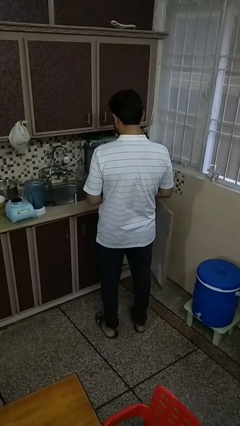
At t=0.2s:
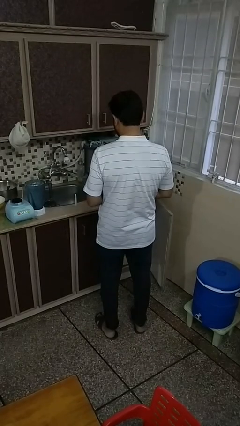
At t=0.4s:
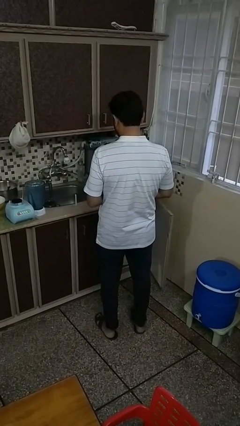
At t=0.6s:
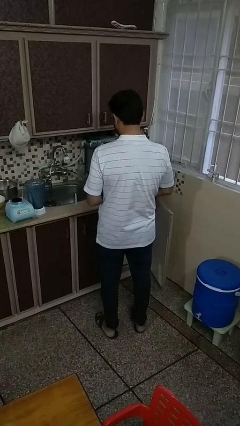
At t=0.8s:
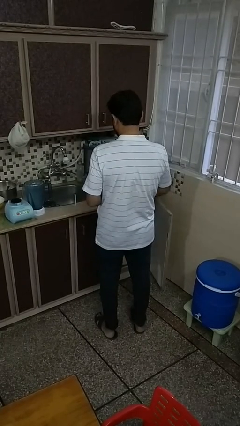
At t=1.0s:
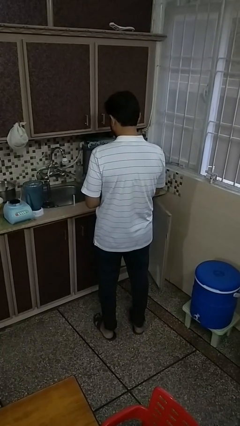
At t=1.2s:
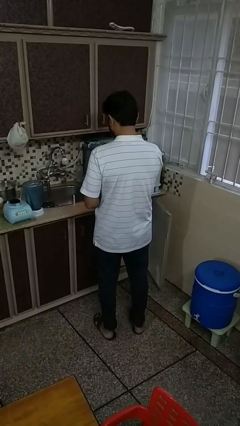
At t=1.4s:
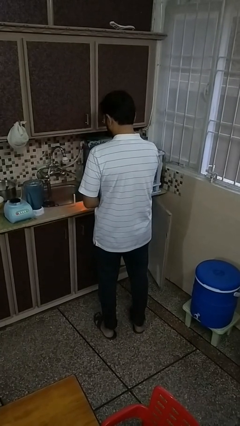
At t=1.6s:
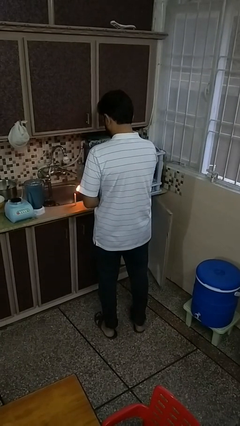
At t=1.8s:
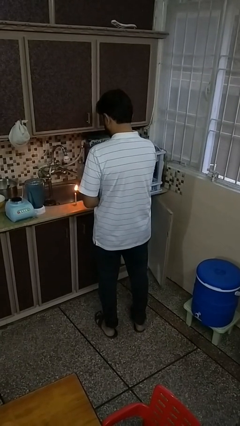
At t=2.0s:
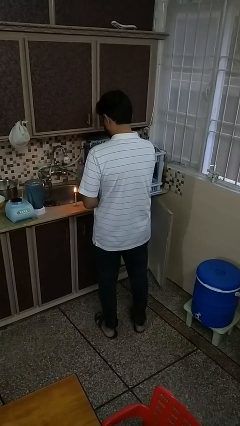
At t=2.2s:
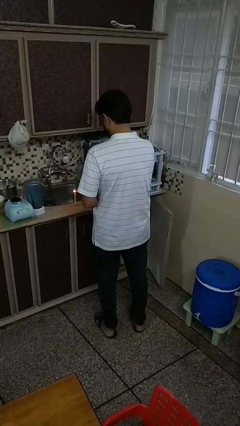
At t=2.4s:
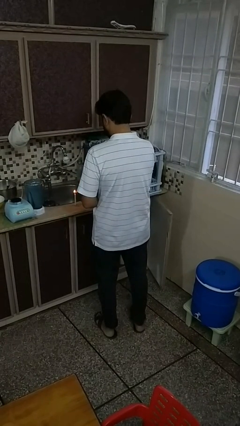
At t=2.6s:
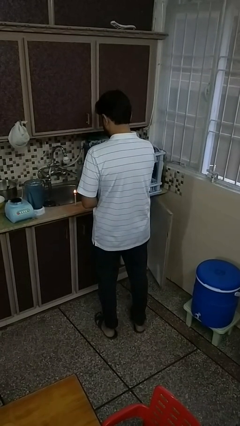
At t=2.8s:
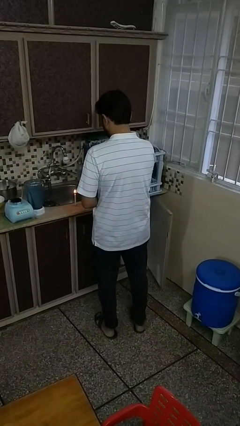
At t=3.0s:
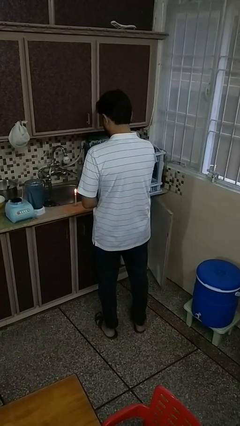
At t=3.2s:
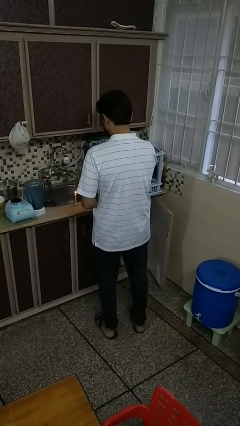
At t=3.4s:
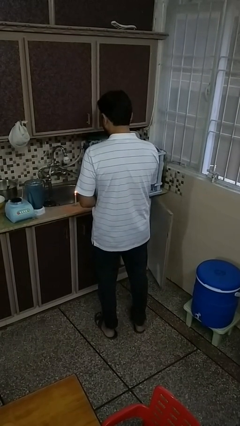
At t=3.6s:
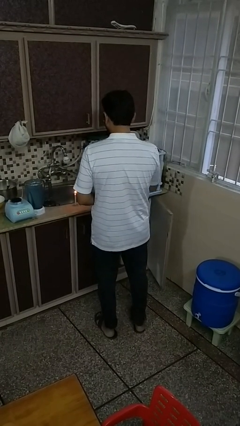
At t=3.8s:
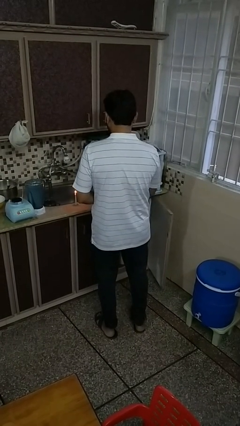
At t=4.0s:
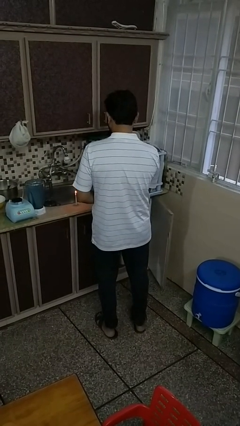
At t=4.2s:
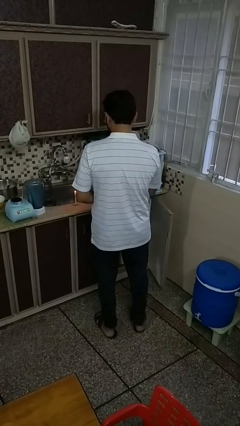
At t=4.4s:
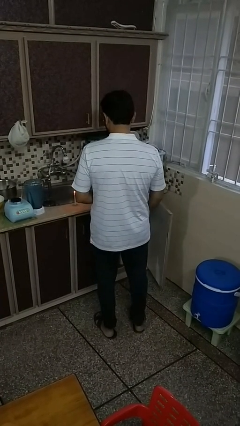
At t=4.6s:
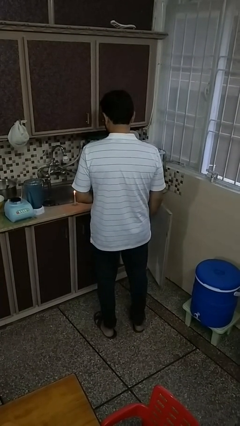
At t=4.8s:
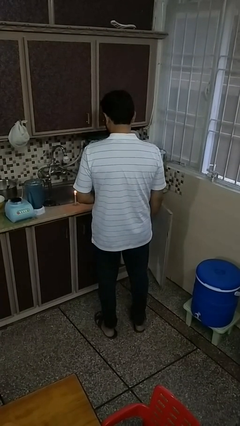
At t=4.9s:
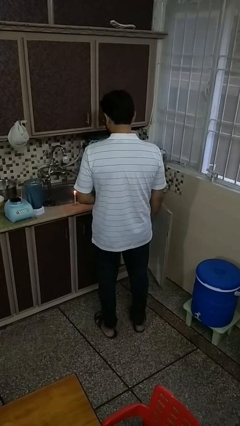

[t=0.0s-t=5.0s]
person lights candle

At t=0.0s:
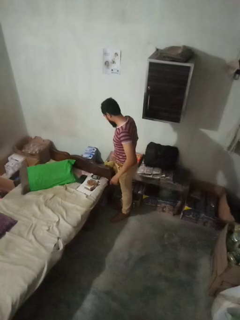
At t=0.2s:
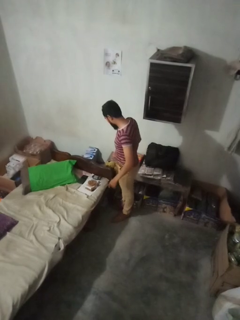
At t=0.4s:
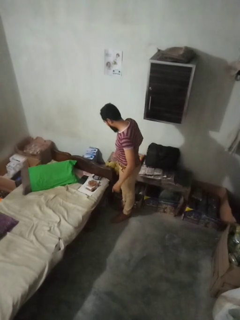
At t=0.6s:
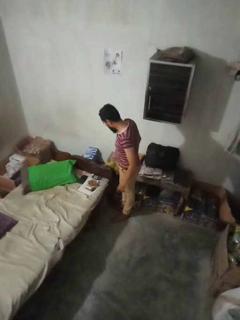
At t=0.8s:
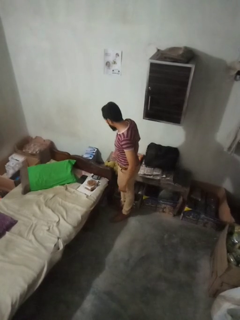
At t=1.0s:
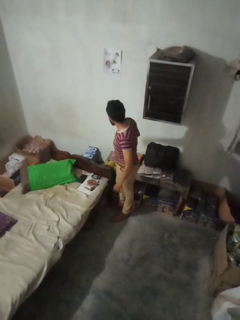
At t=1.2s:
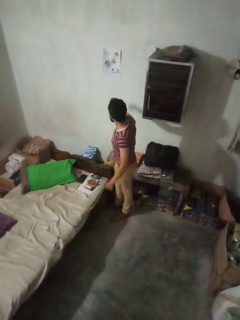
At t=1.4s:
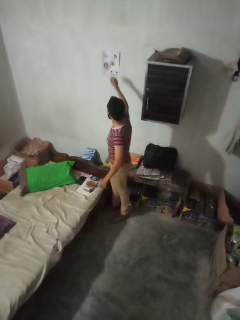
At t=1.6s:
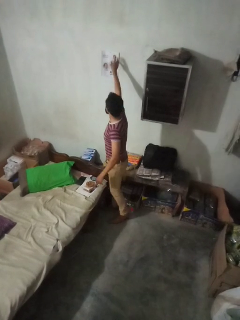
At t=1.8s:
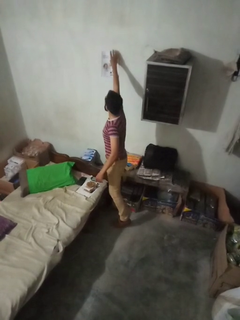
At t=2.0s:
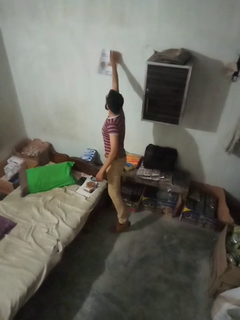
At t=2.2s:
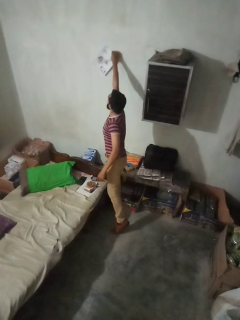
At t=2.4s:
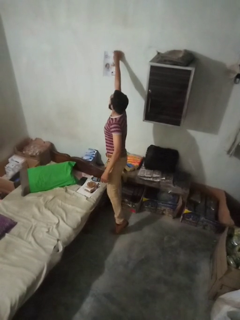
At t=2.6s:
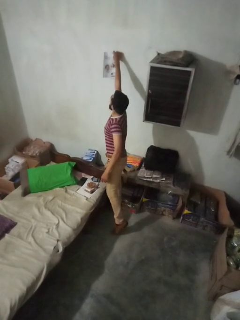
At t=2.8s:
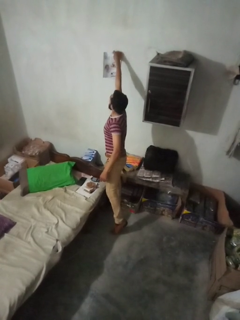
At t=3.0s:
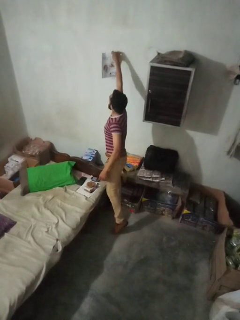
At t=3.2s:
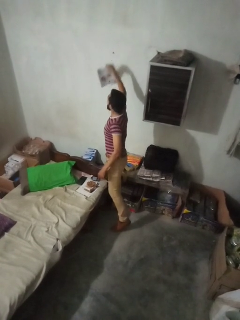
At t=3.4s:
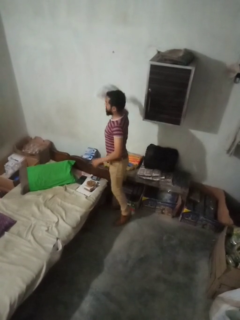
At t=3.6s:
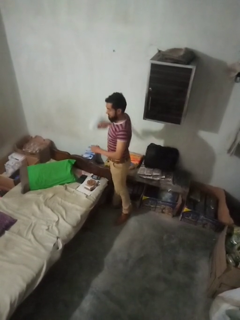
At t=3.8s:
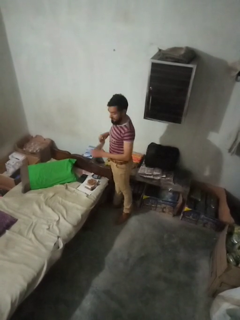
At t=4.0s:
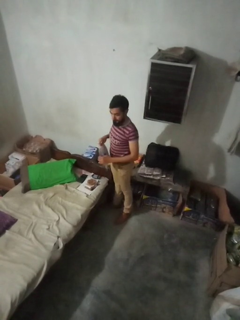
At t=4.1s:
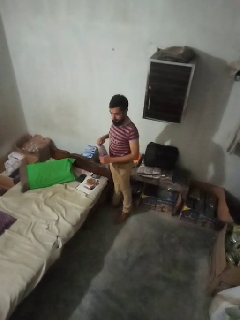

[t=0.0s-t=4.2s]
person takes down picture frame

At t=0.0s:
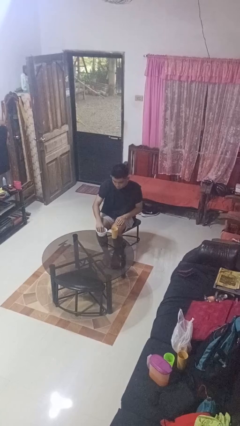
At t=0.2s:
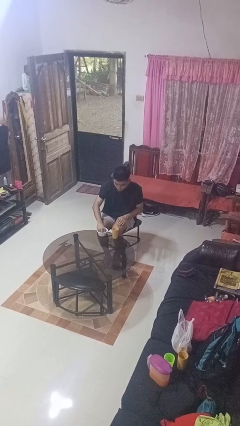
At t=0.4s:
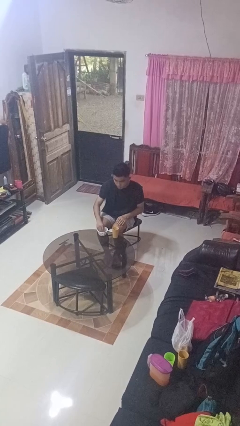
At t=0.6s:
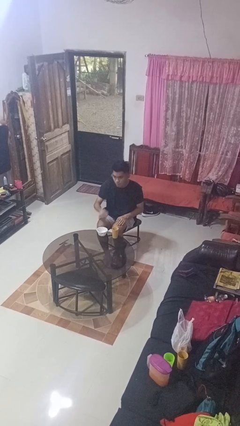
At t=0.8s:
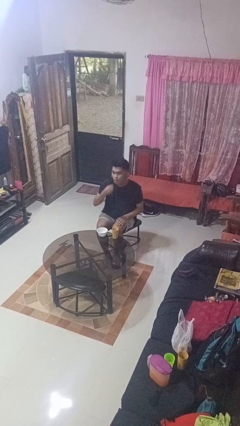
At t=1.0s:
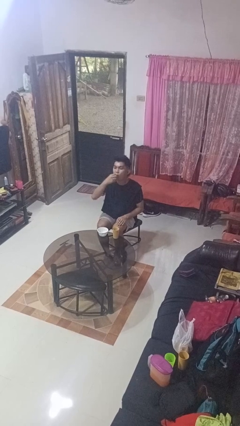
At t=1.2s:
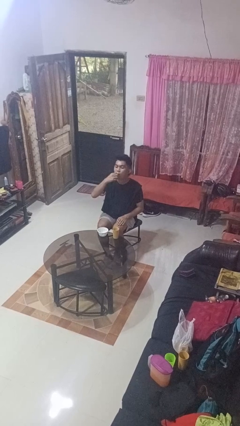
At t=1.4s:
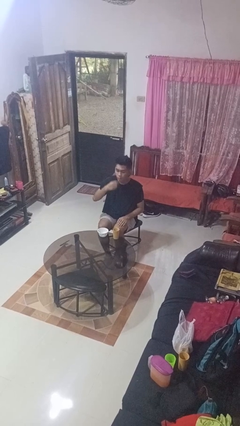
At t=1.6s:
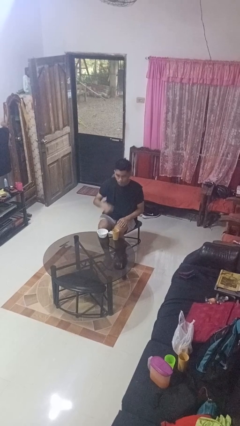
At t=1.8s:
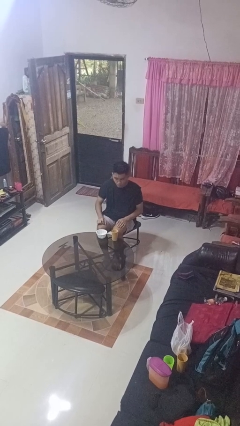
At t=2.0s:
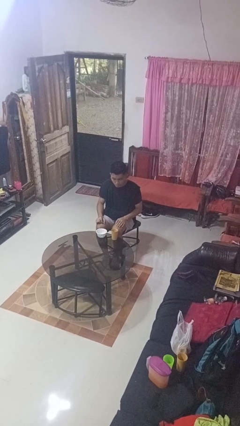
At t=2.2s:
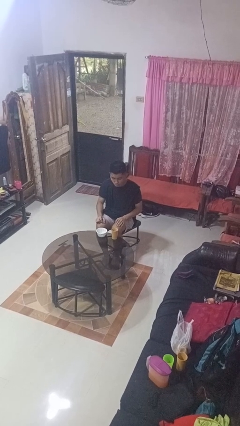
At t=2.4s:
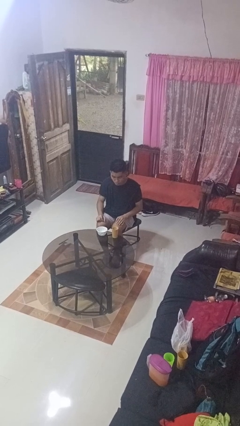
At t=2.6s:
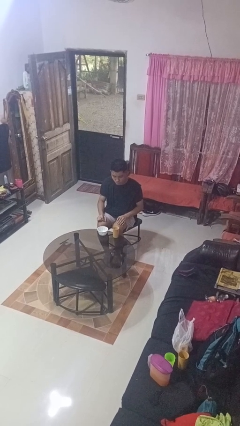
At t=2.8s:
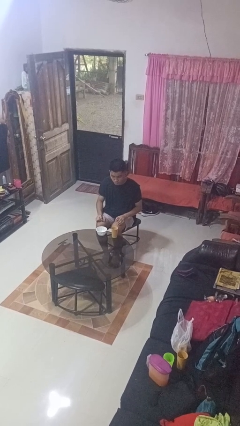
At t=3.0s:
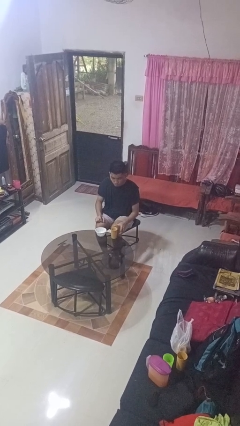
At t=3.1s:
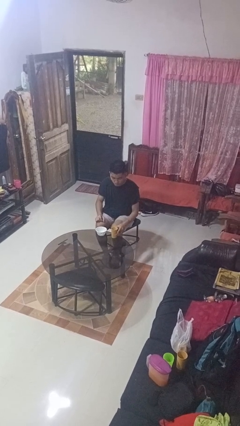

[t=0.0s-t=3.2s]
person takes medicine pills

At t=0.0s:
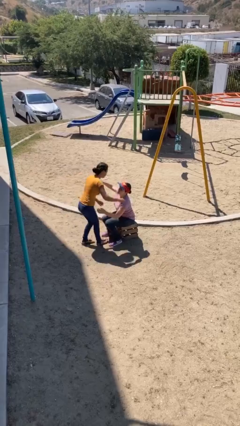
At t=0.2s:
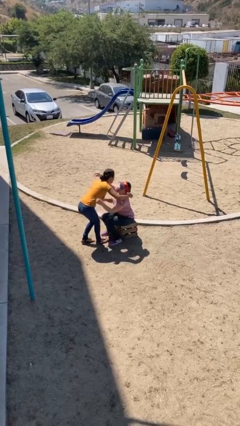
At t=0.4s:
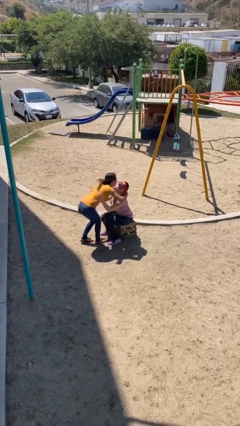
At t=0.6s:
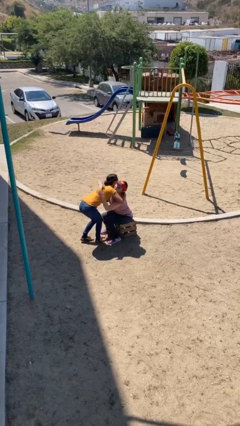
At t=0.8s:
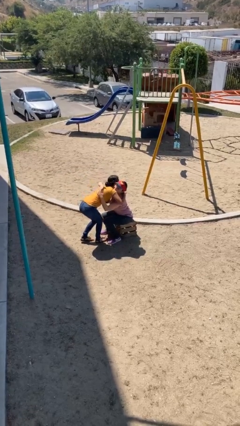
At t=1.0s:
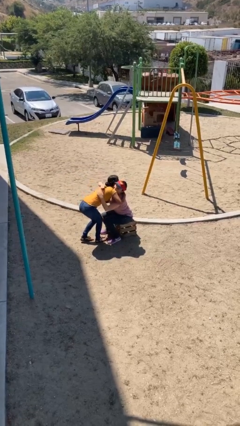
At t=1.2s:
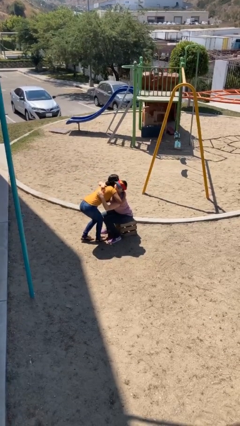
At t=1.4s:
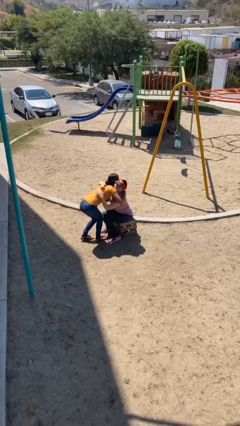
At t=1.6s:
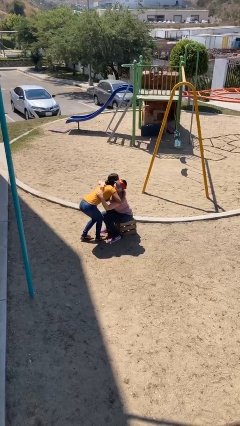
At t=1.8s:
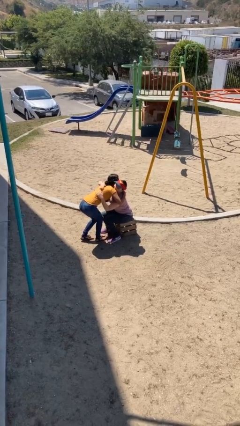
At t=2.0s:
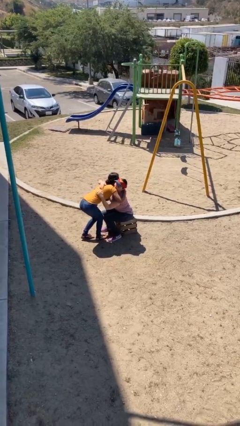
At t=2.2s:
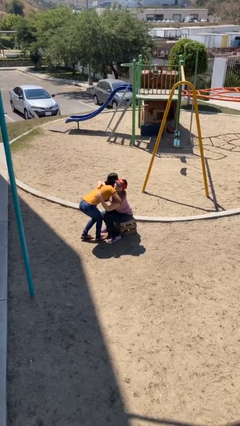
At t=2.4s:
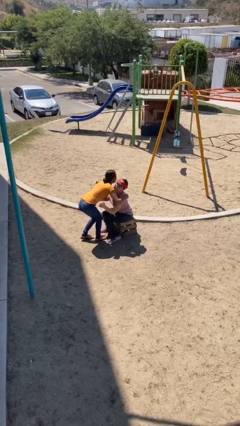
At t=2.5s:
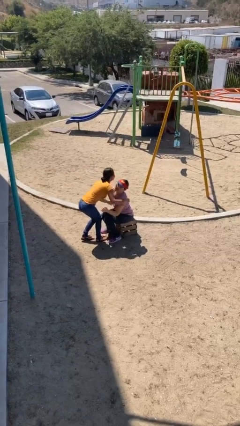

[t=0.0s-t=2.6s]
person embraces person

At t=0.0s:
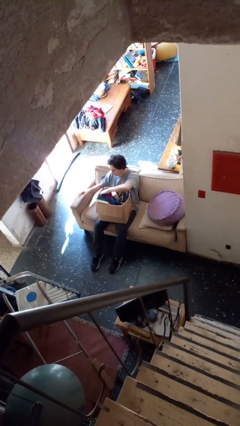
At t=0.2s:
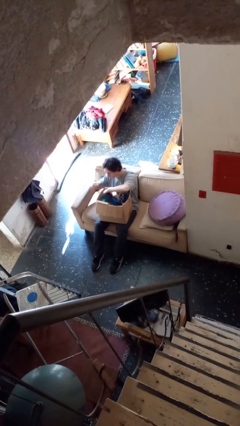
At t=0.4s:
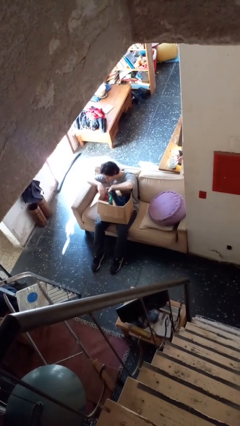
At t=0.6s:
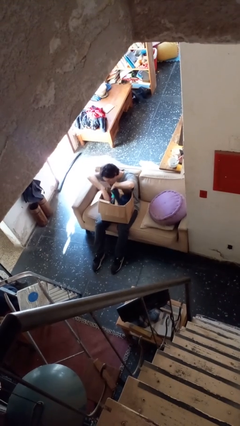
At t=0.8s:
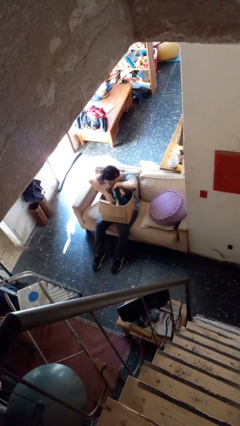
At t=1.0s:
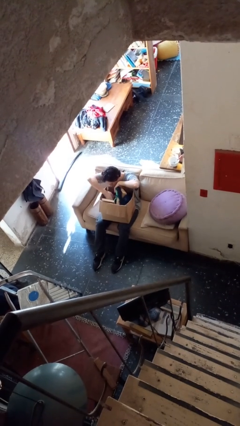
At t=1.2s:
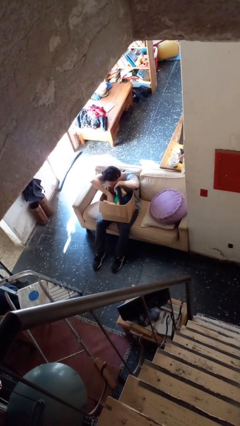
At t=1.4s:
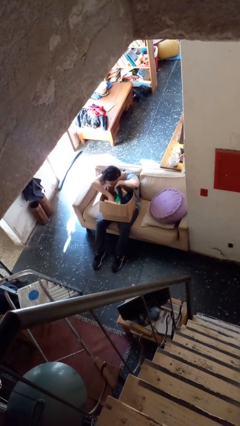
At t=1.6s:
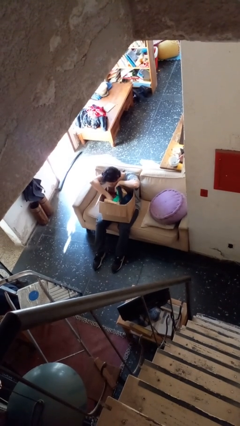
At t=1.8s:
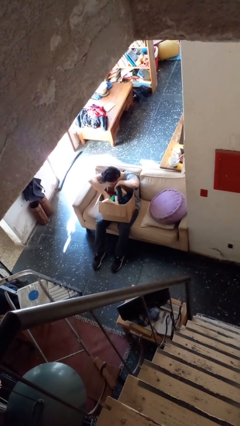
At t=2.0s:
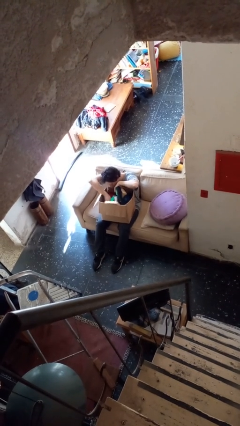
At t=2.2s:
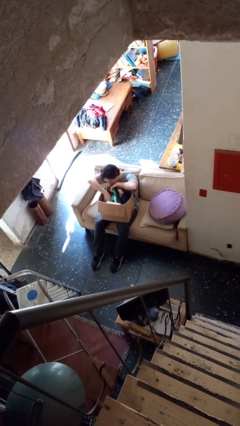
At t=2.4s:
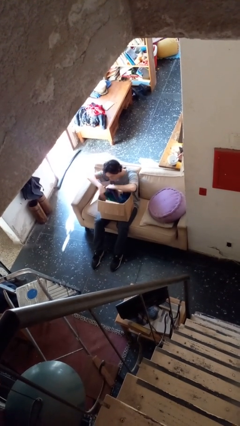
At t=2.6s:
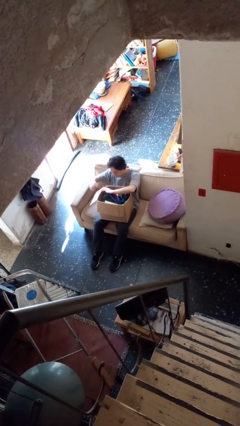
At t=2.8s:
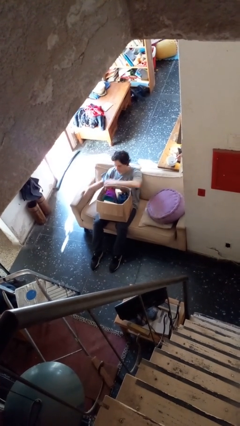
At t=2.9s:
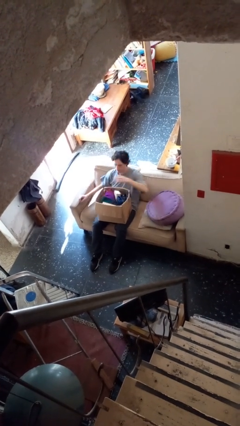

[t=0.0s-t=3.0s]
person searches in box

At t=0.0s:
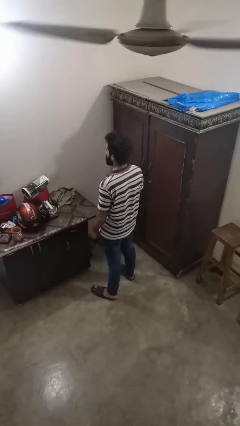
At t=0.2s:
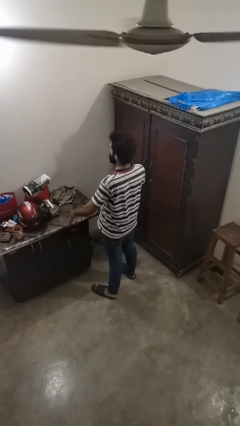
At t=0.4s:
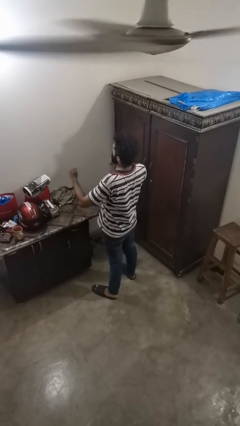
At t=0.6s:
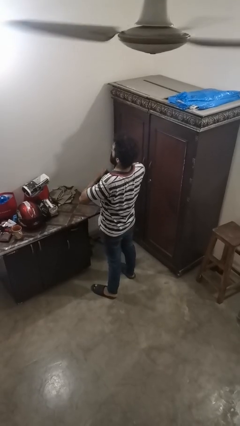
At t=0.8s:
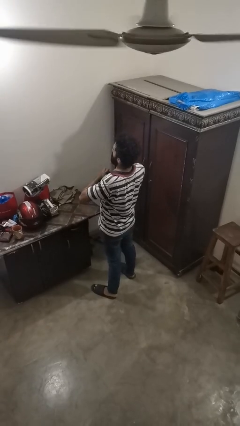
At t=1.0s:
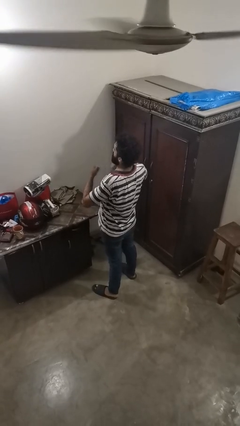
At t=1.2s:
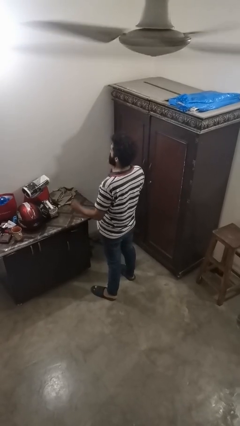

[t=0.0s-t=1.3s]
person drums on chest
